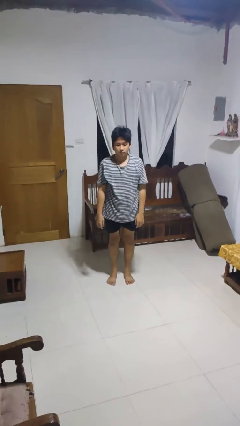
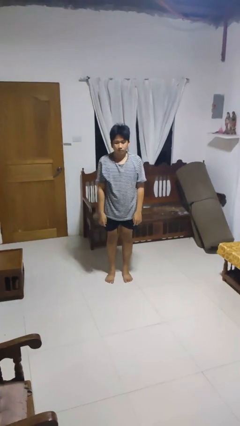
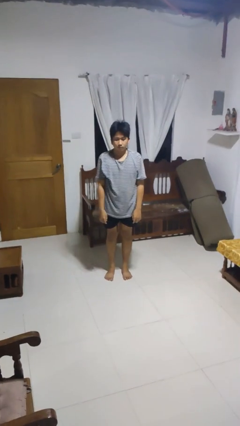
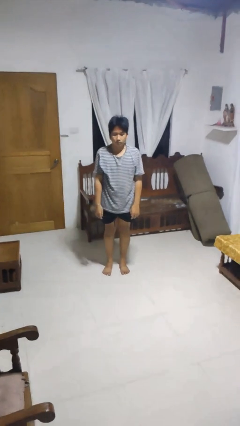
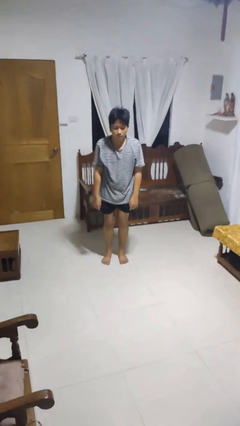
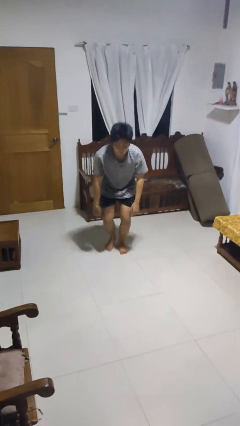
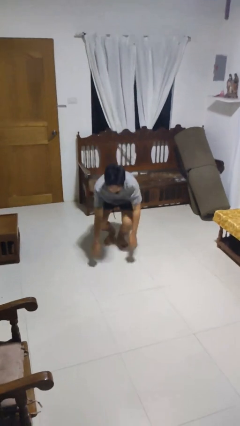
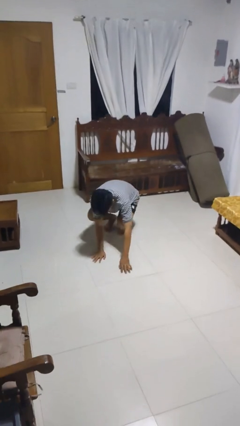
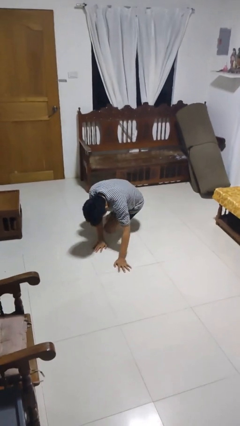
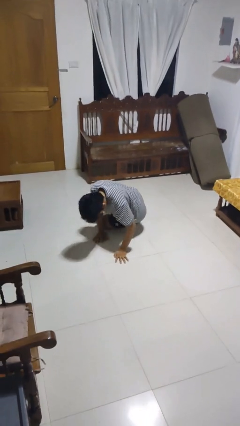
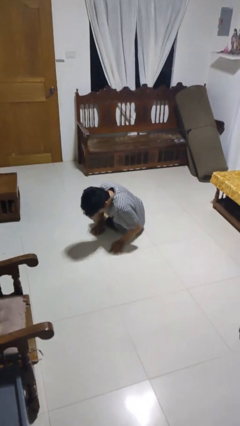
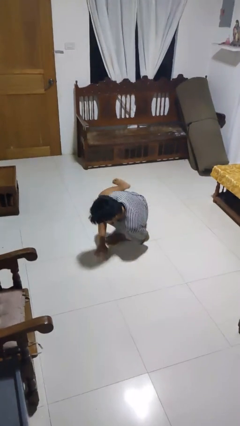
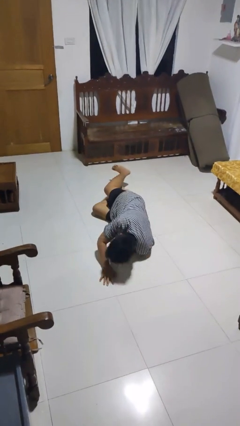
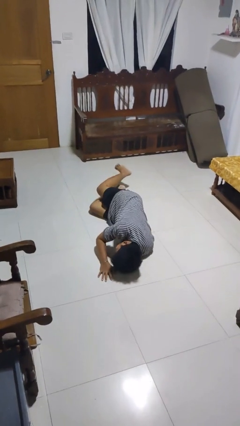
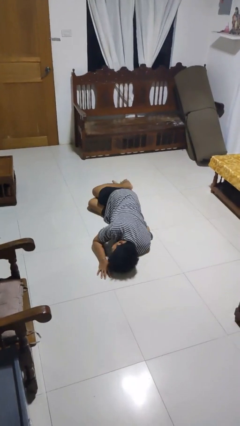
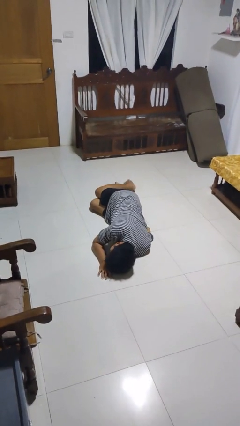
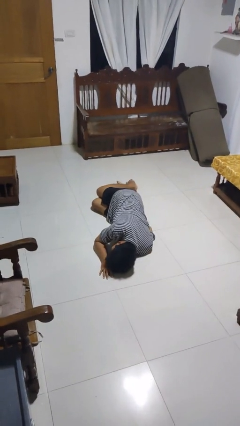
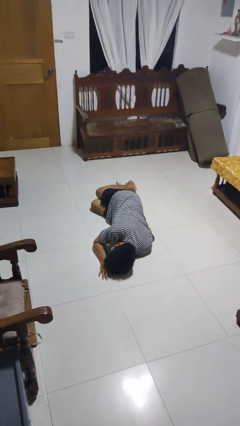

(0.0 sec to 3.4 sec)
person falls while standing

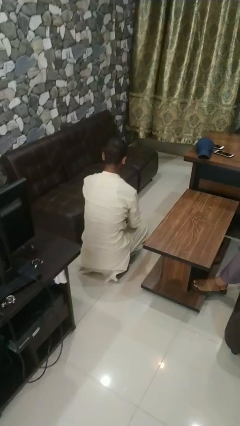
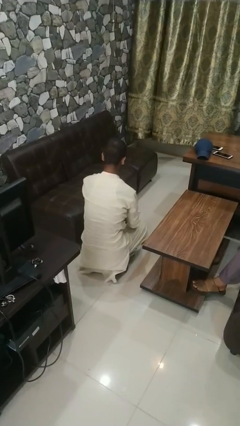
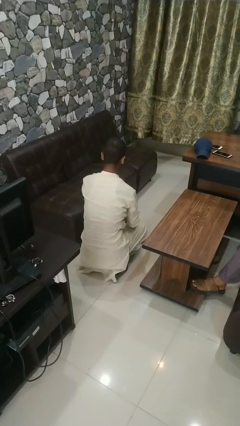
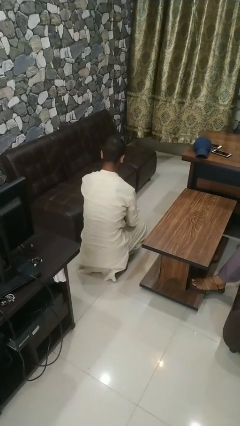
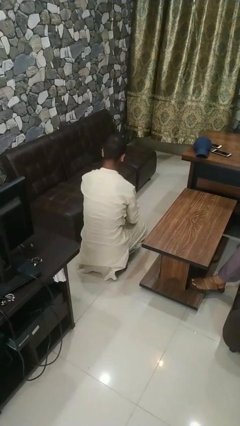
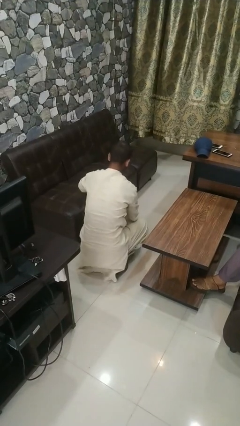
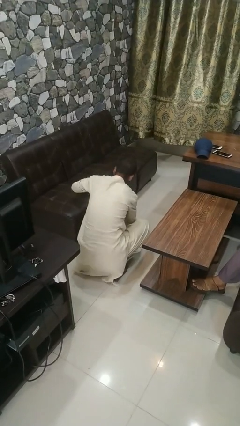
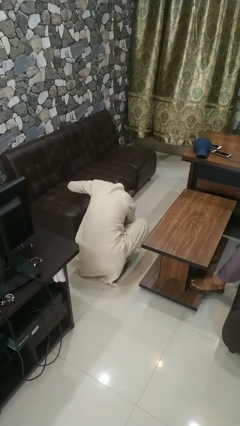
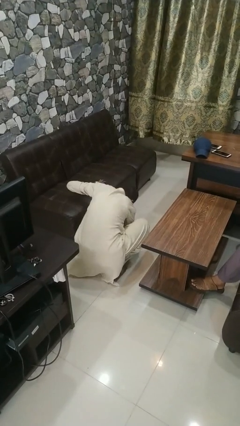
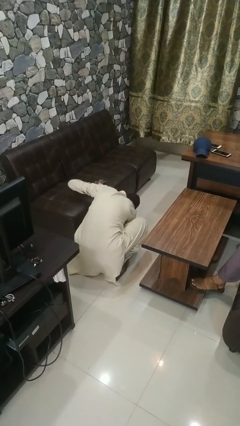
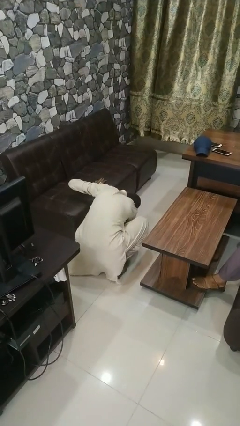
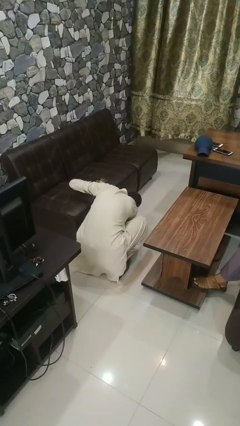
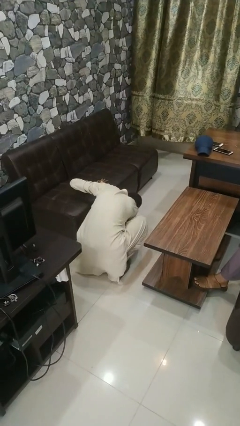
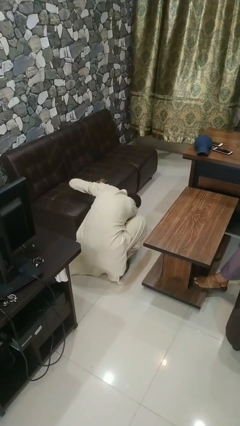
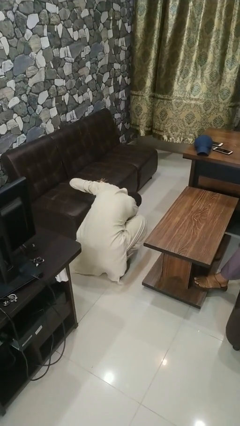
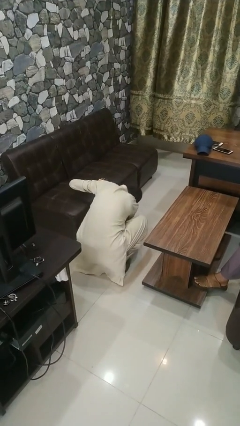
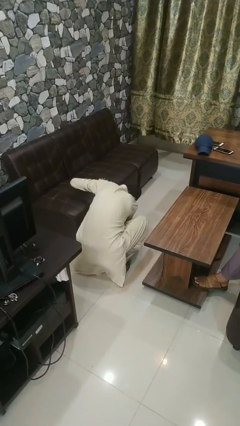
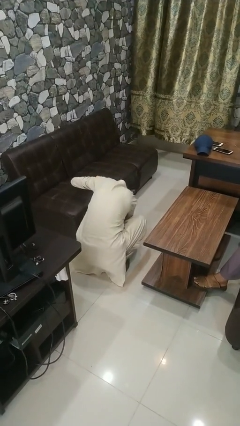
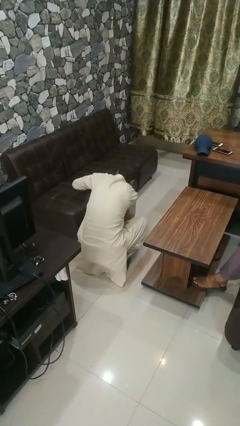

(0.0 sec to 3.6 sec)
person searches under couch

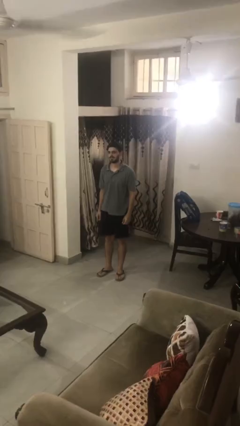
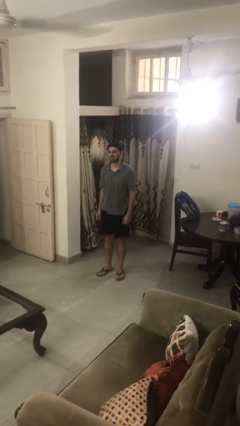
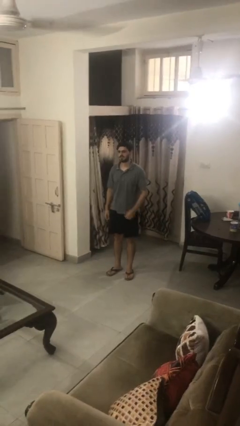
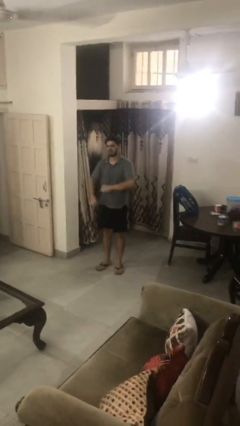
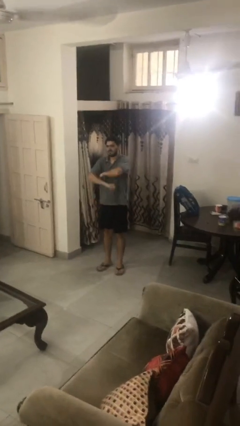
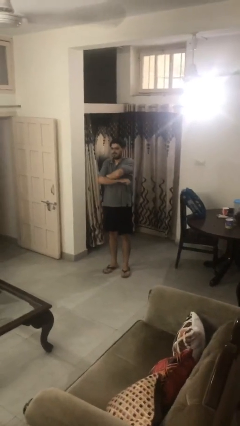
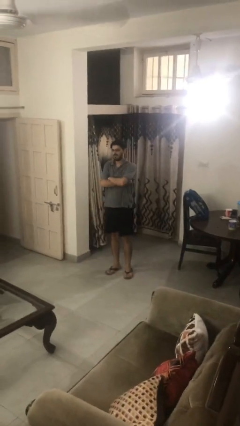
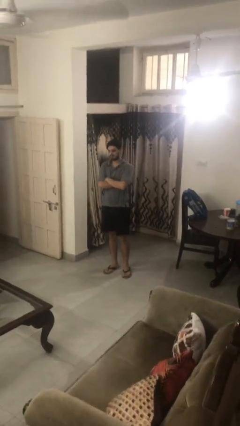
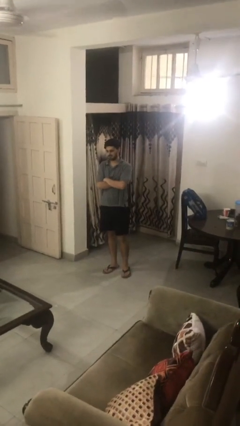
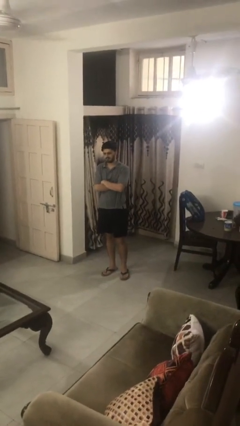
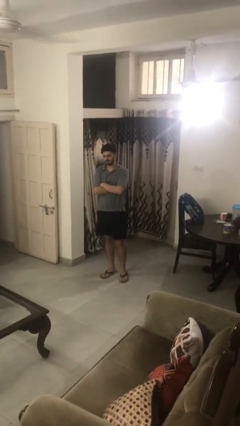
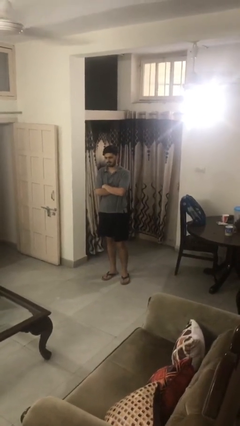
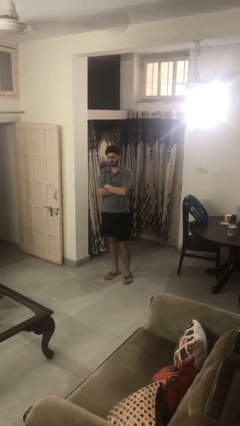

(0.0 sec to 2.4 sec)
person crosses arms

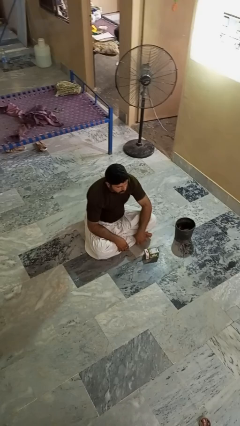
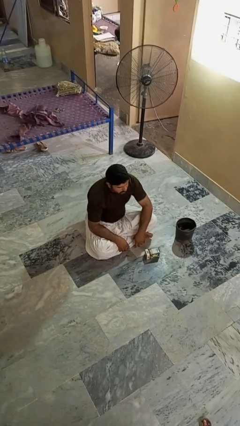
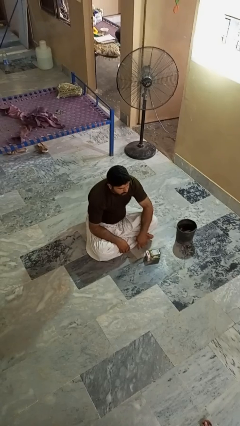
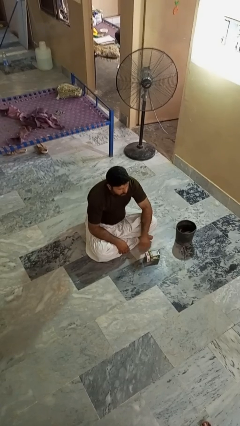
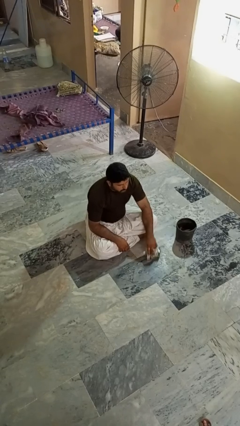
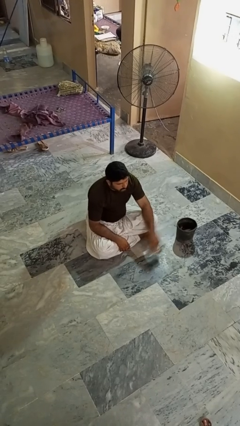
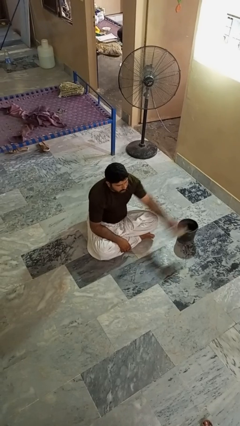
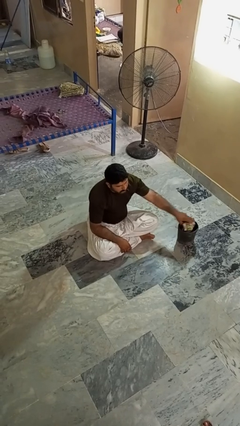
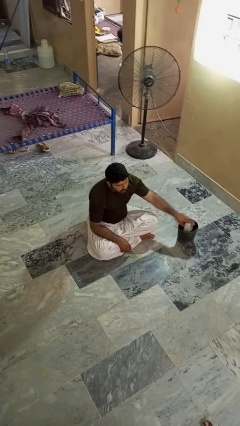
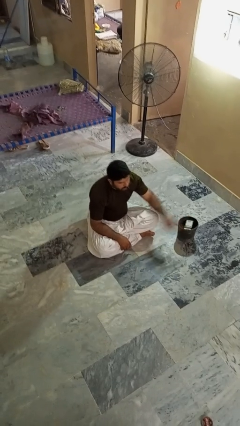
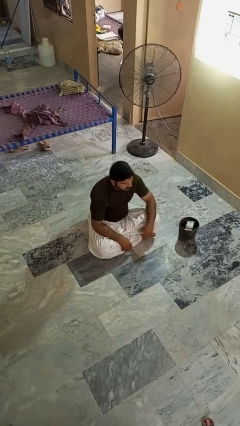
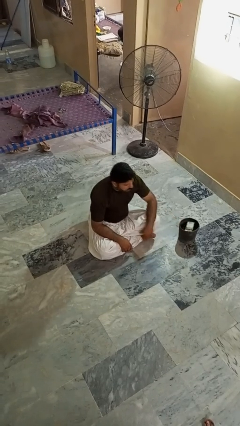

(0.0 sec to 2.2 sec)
person puts object into basket

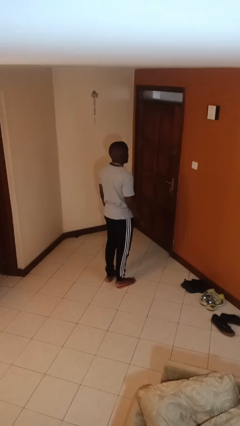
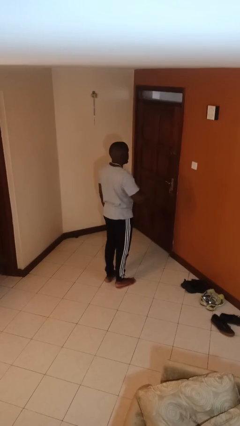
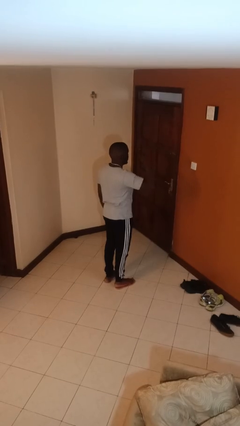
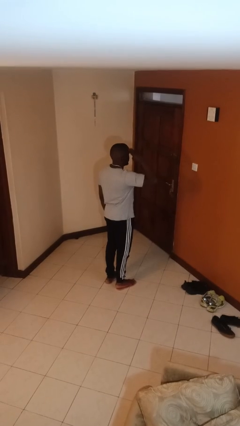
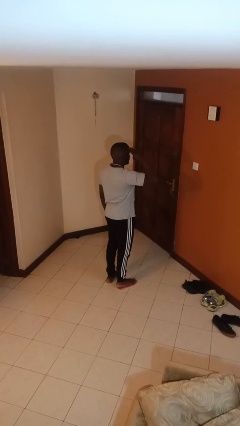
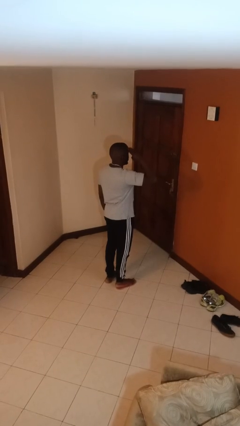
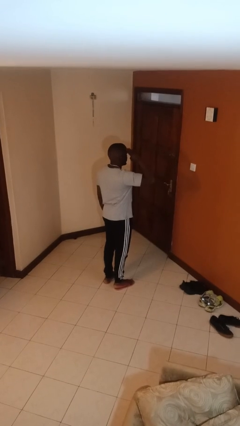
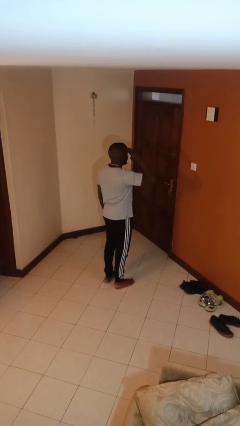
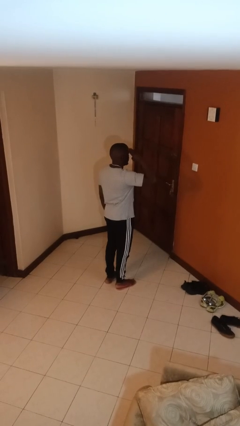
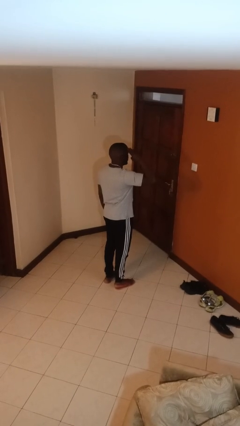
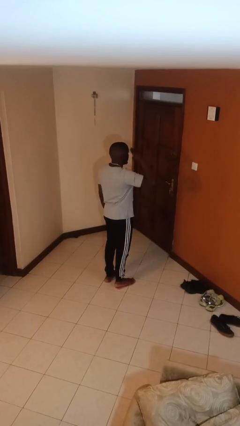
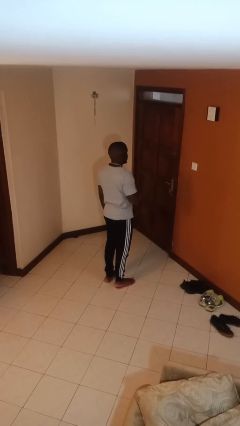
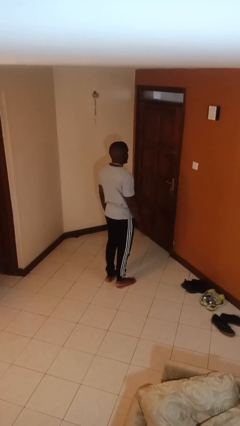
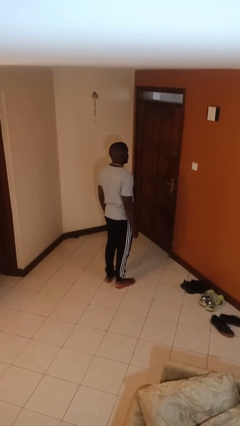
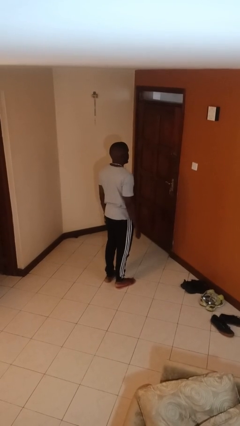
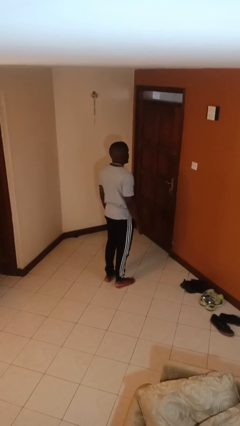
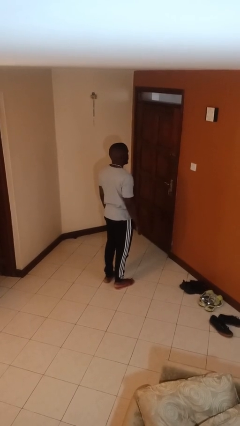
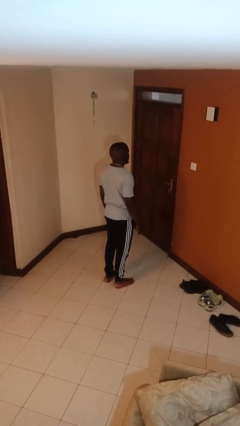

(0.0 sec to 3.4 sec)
person salutes

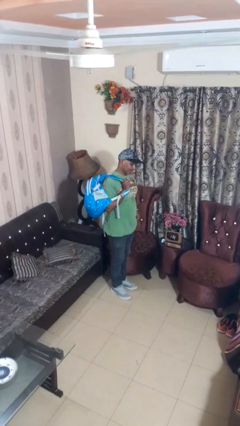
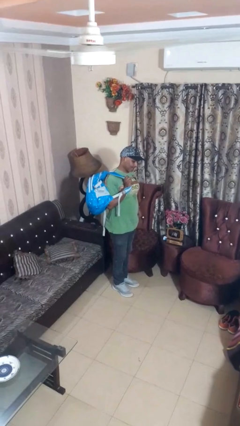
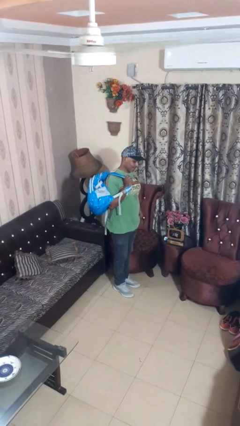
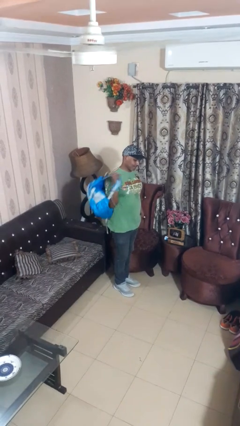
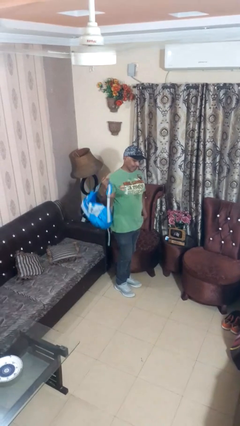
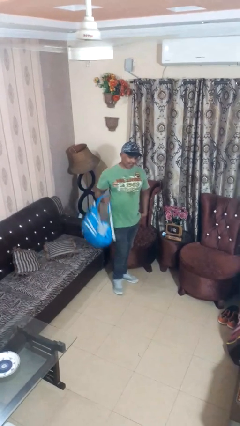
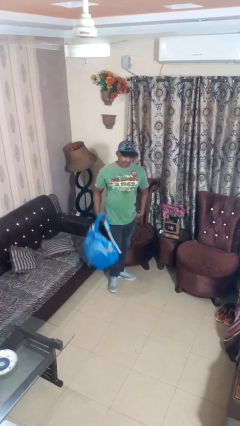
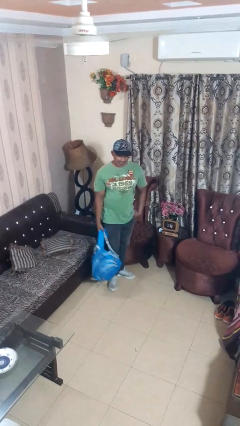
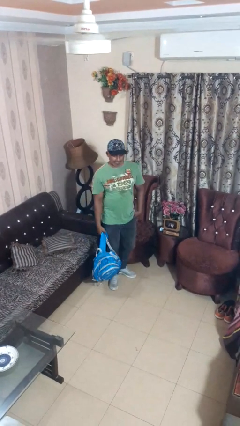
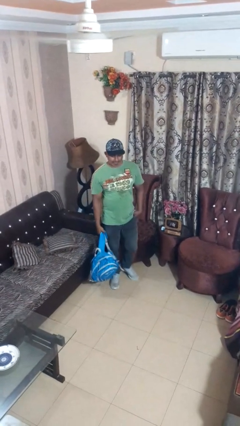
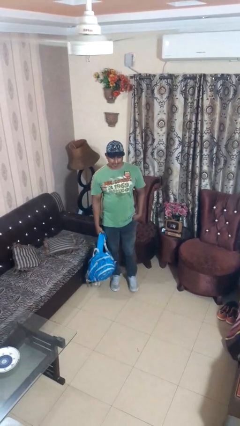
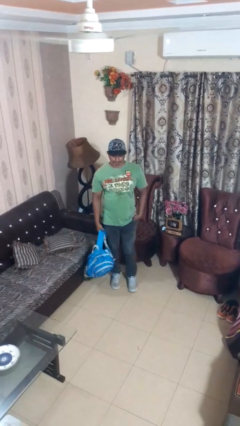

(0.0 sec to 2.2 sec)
person takes off backpack

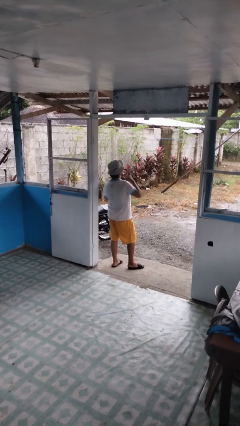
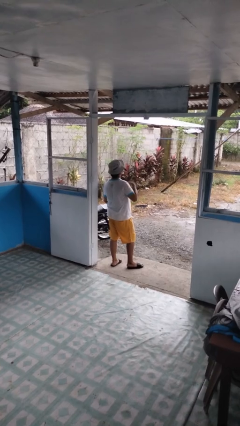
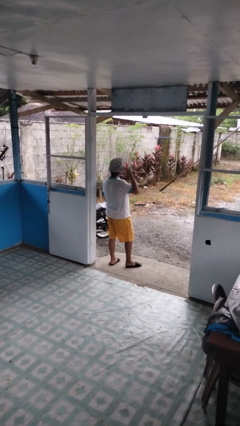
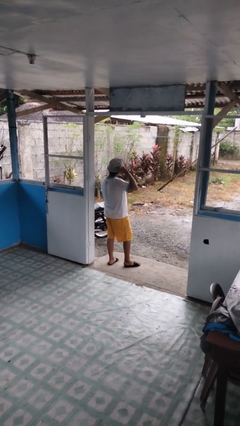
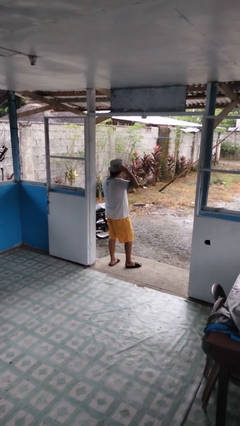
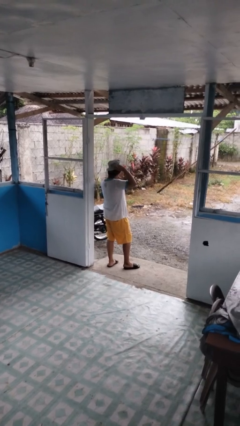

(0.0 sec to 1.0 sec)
person takes off hat
